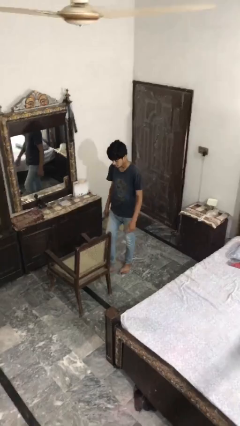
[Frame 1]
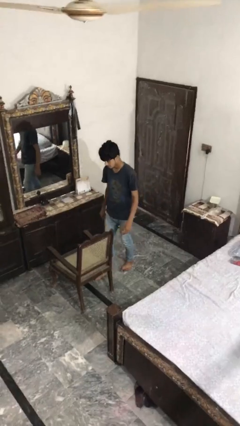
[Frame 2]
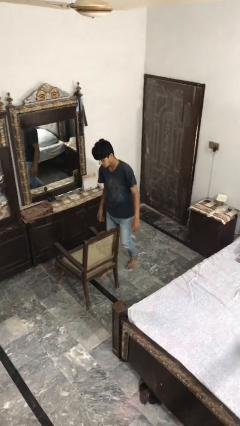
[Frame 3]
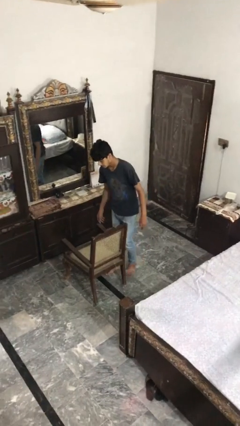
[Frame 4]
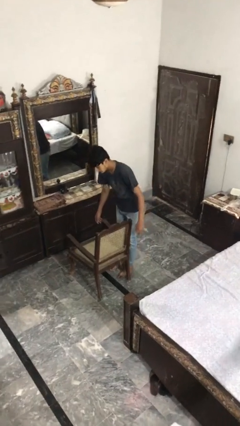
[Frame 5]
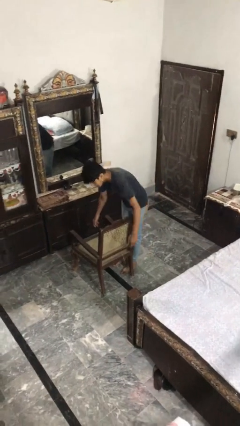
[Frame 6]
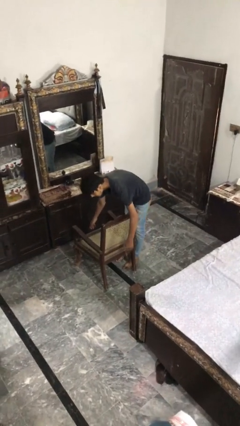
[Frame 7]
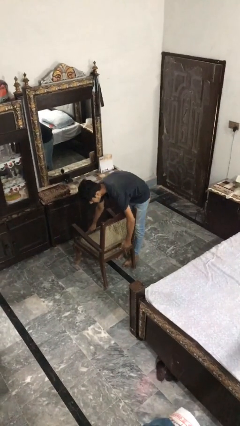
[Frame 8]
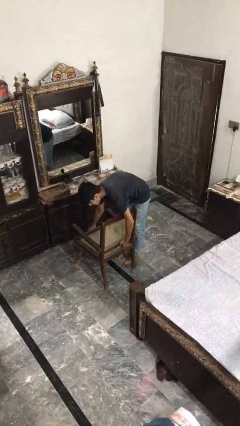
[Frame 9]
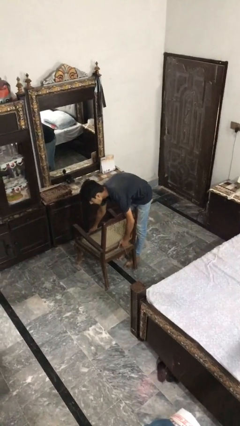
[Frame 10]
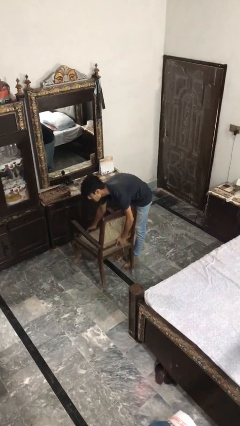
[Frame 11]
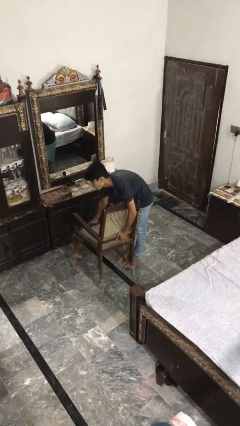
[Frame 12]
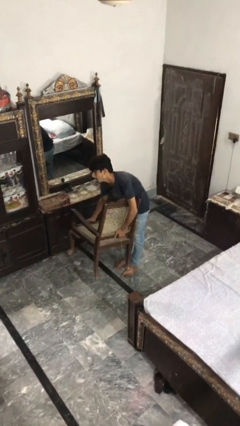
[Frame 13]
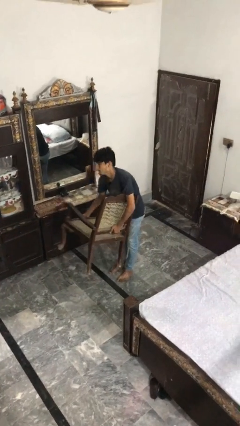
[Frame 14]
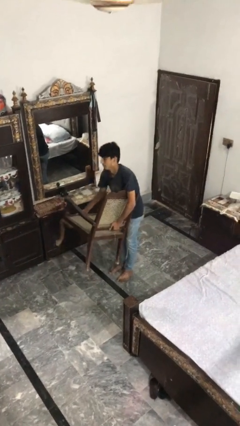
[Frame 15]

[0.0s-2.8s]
person picks up object from floor

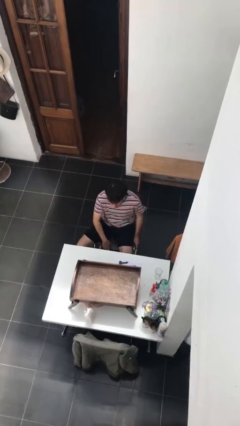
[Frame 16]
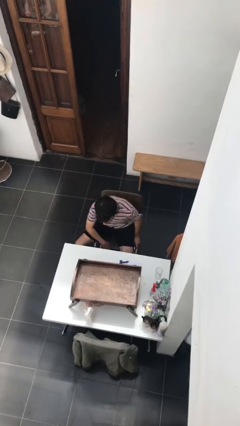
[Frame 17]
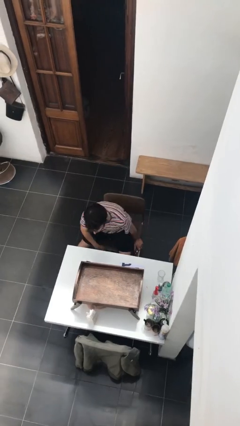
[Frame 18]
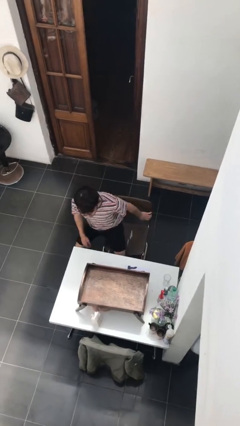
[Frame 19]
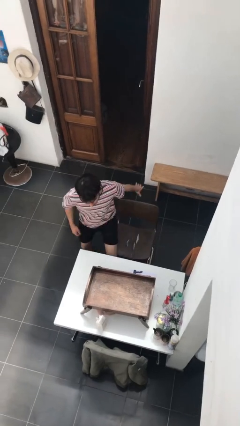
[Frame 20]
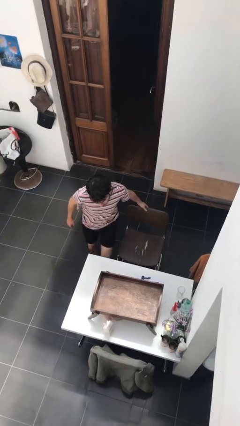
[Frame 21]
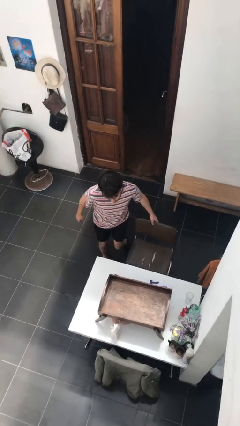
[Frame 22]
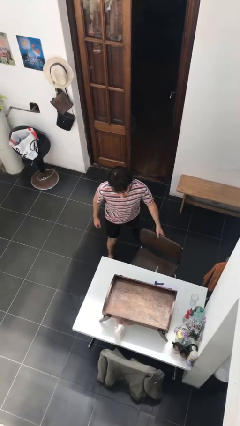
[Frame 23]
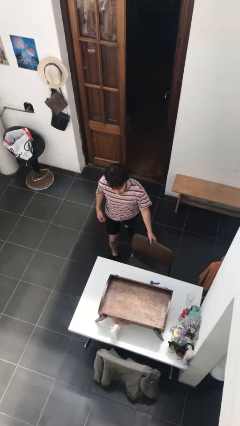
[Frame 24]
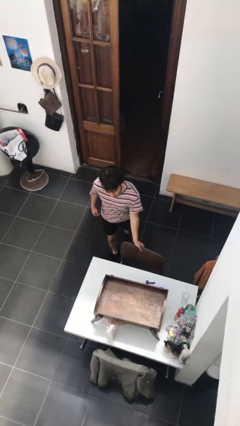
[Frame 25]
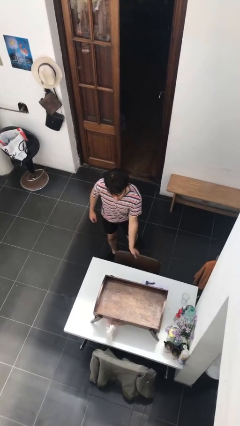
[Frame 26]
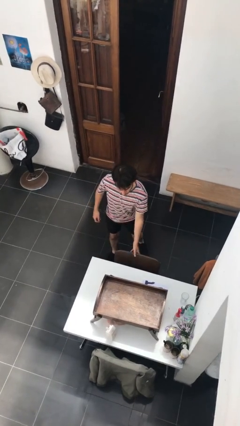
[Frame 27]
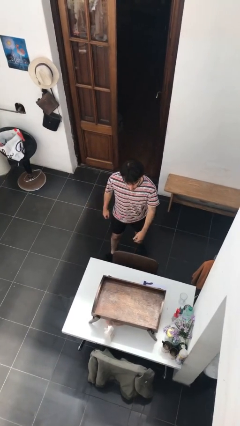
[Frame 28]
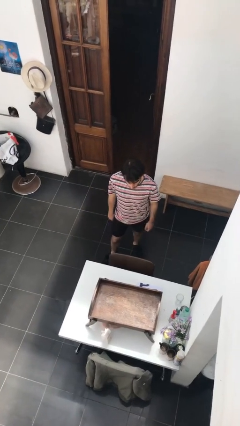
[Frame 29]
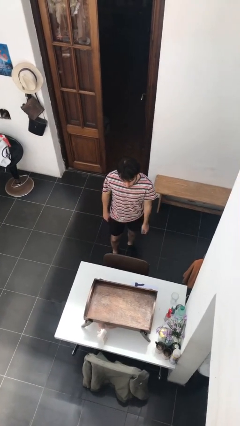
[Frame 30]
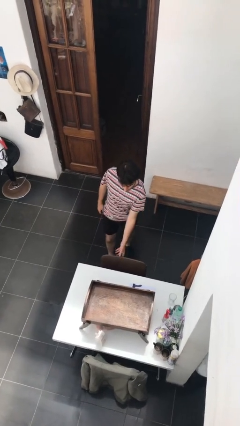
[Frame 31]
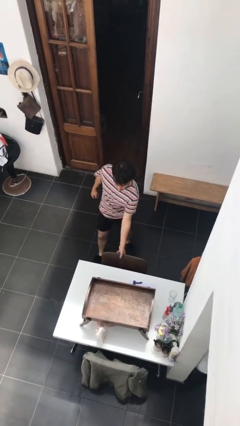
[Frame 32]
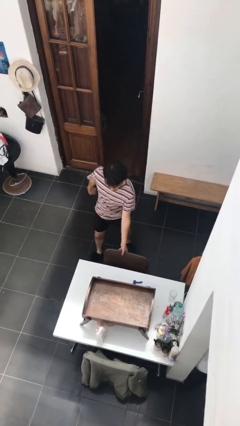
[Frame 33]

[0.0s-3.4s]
person stands up

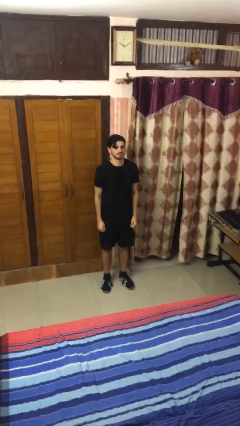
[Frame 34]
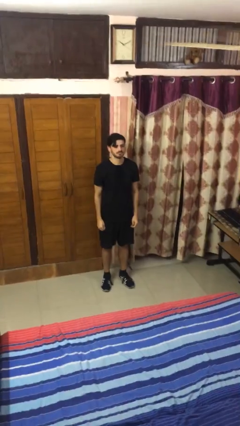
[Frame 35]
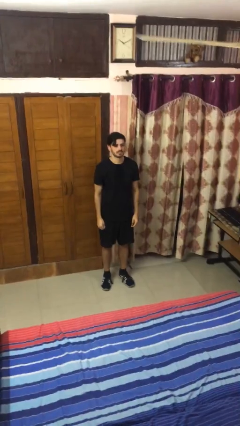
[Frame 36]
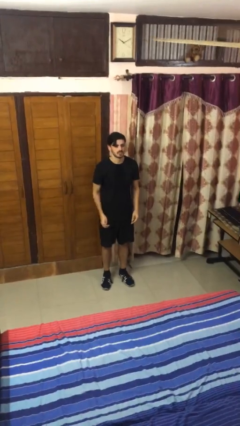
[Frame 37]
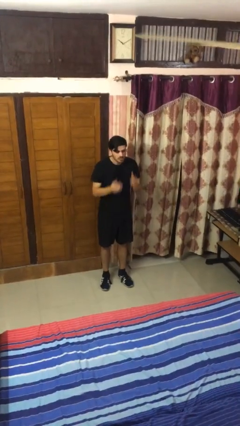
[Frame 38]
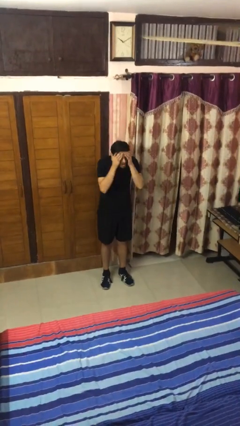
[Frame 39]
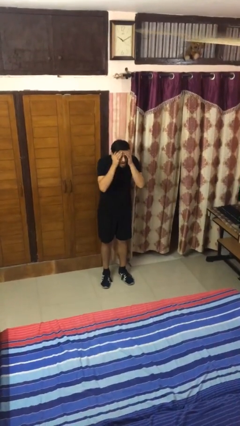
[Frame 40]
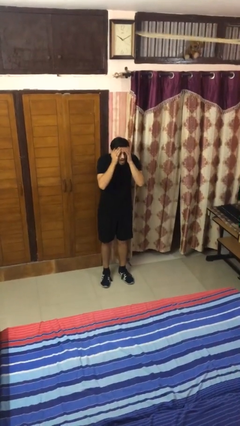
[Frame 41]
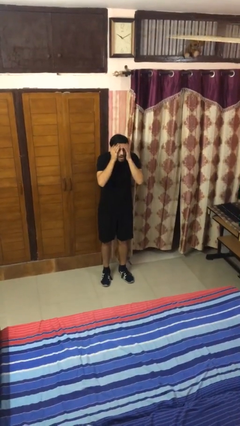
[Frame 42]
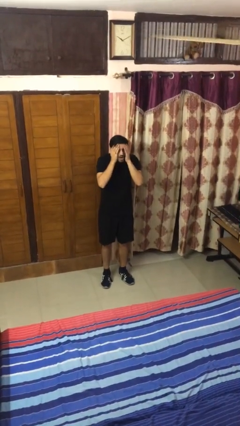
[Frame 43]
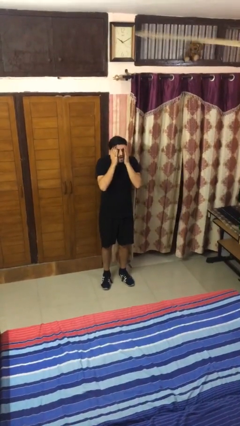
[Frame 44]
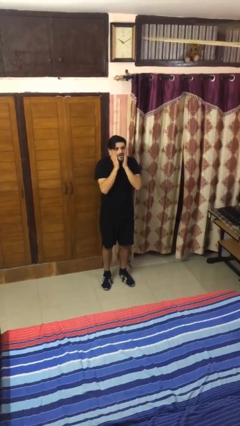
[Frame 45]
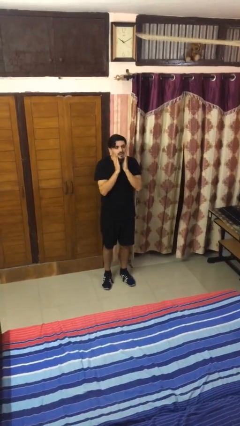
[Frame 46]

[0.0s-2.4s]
person covers face with hands

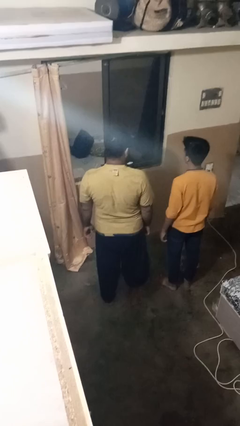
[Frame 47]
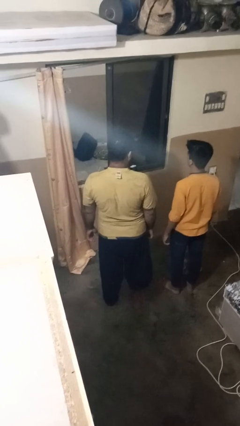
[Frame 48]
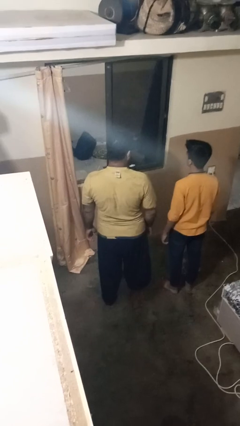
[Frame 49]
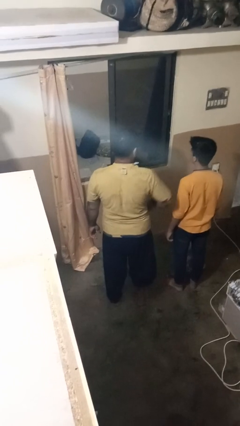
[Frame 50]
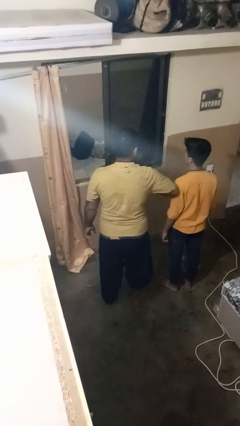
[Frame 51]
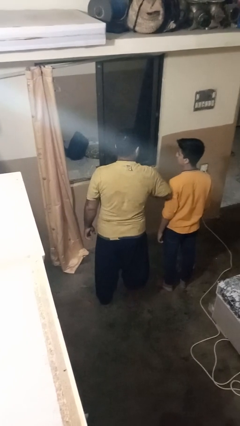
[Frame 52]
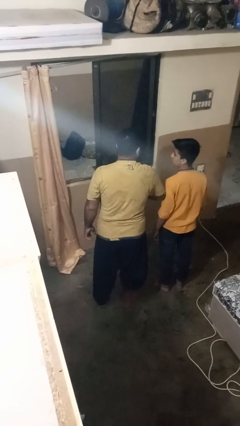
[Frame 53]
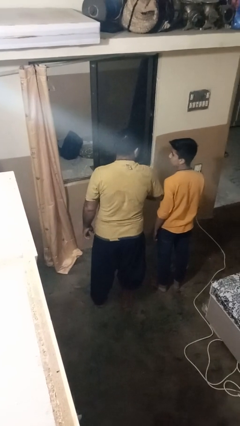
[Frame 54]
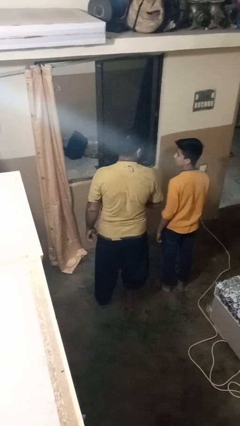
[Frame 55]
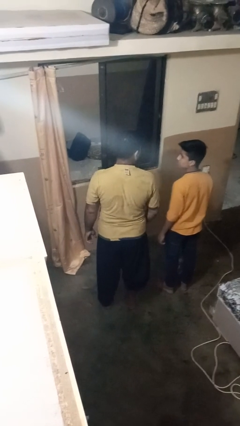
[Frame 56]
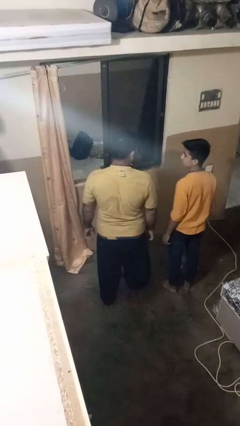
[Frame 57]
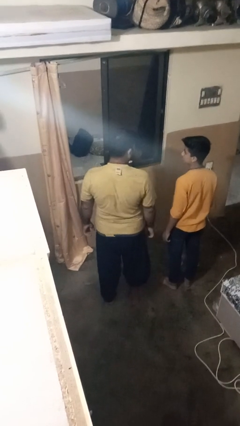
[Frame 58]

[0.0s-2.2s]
person nudges person with elbow

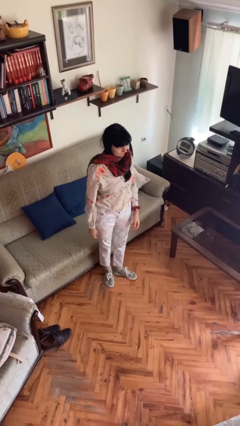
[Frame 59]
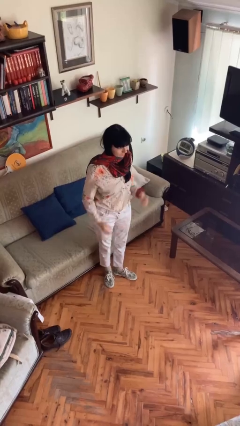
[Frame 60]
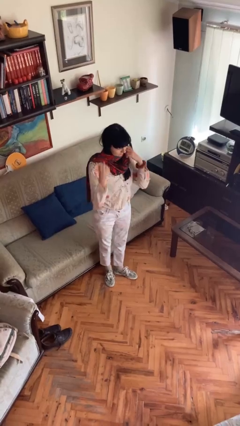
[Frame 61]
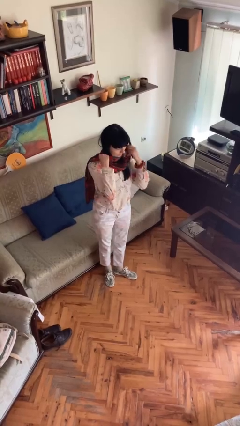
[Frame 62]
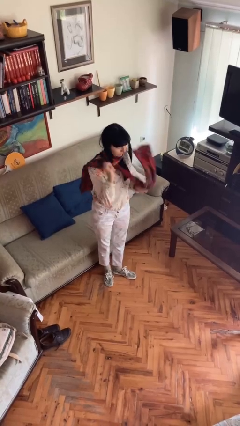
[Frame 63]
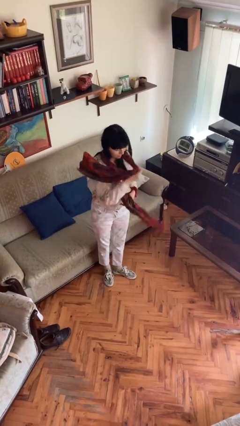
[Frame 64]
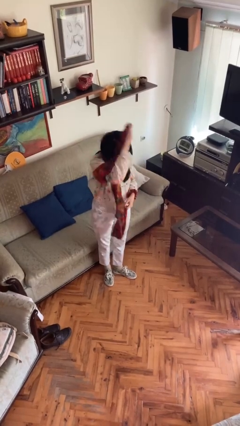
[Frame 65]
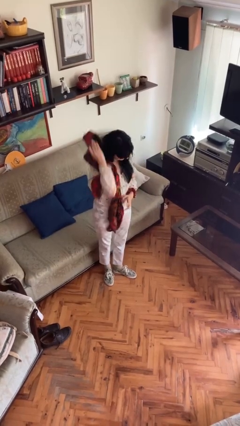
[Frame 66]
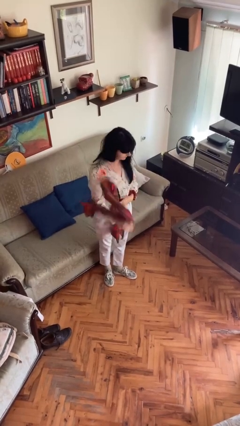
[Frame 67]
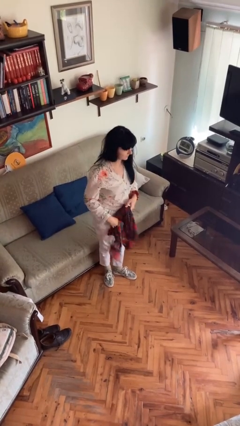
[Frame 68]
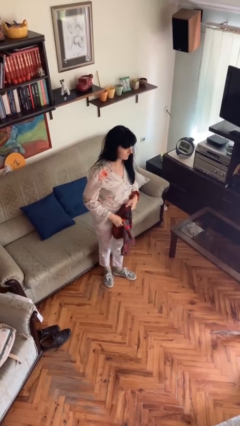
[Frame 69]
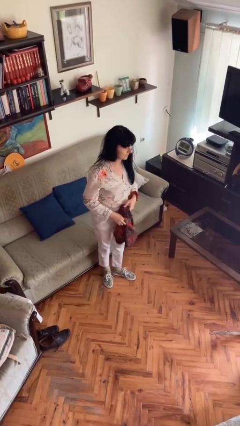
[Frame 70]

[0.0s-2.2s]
person takes off scarf

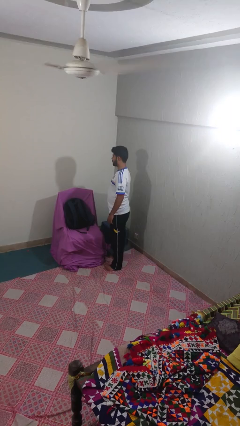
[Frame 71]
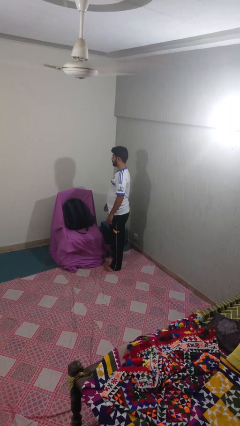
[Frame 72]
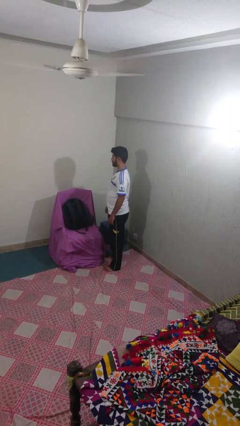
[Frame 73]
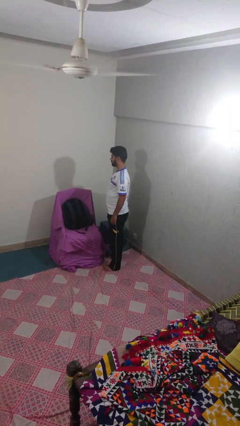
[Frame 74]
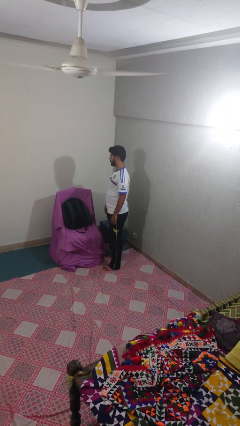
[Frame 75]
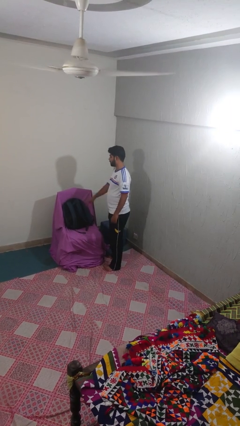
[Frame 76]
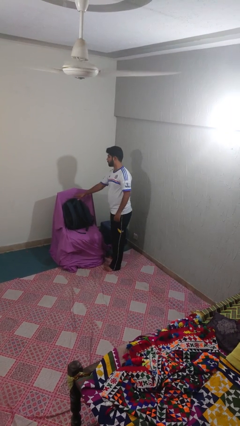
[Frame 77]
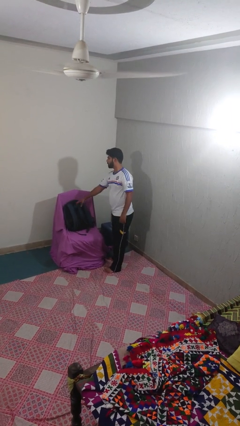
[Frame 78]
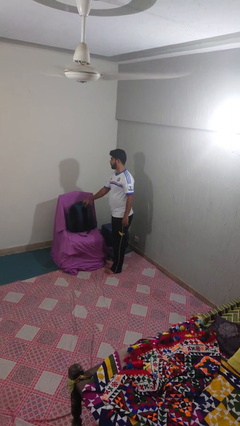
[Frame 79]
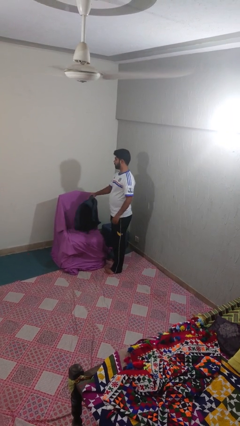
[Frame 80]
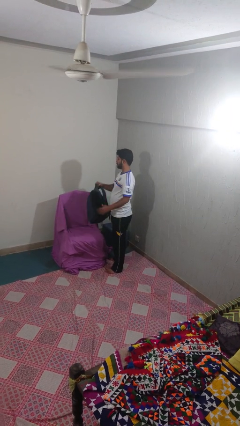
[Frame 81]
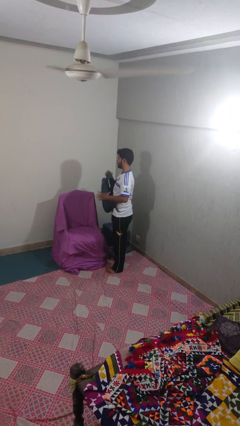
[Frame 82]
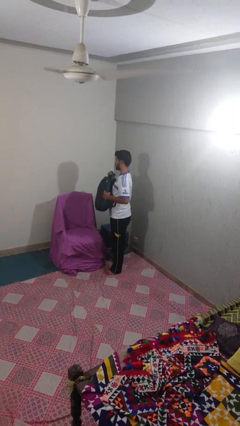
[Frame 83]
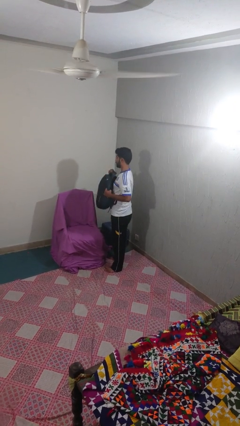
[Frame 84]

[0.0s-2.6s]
person picks up object from couch

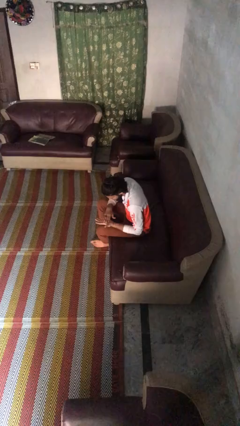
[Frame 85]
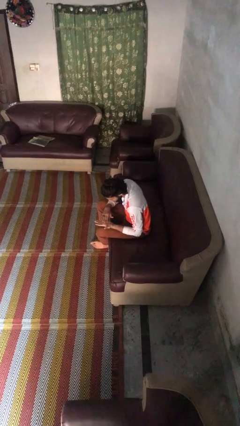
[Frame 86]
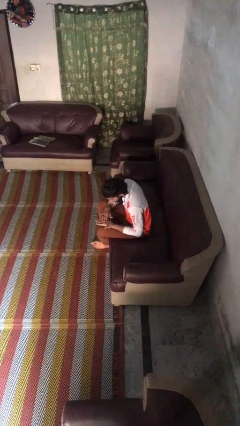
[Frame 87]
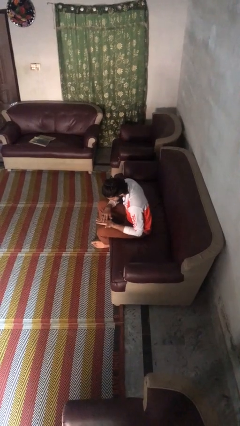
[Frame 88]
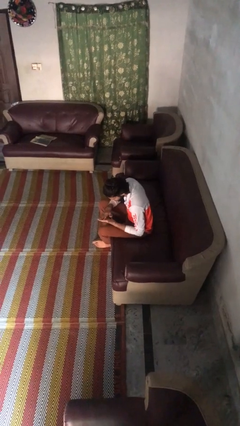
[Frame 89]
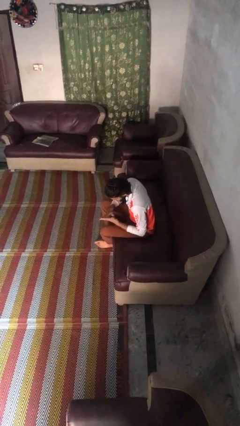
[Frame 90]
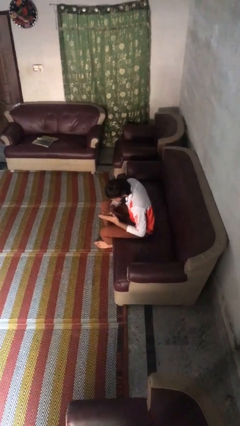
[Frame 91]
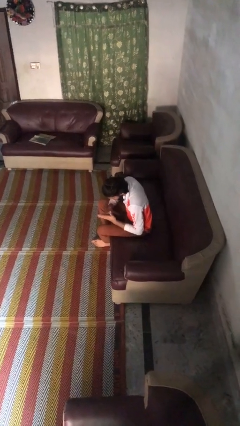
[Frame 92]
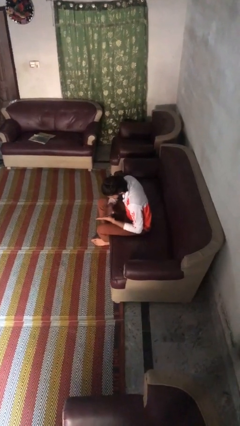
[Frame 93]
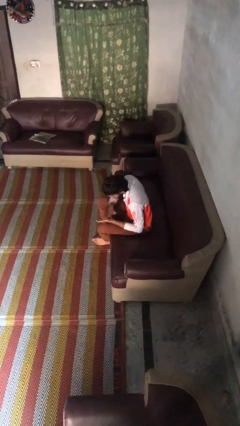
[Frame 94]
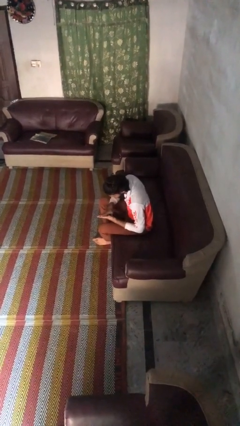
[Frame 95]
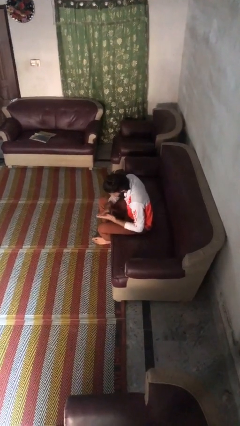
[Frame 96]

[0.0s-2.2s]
person looks at hands in lap
